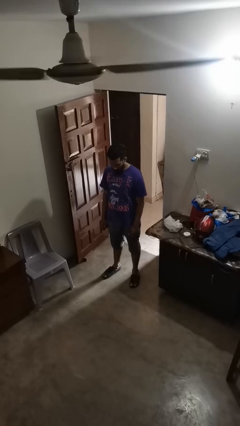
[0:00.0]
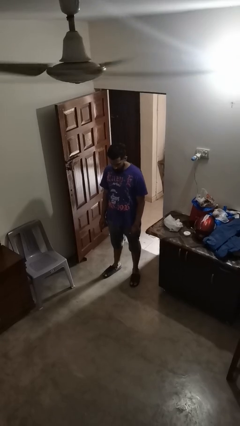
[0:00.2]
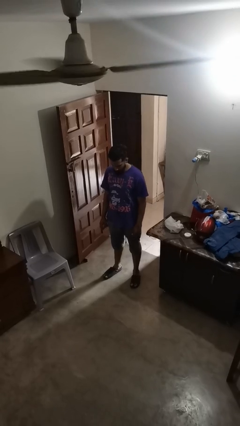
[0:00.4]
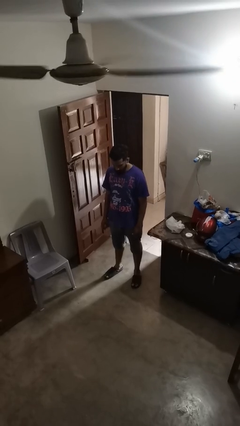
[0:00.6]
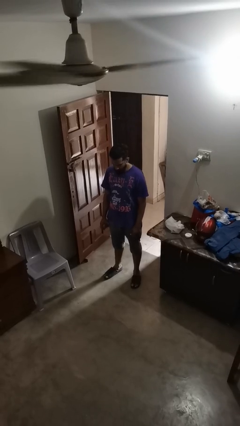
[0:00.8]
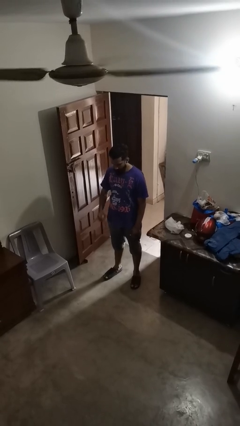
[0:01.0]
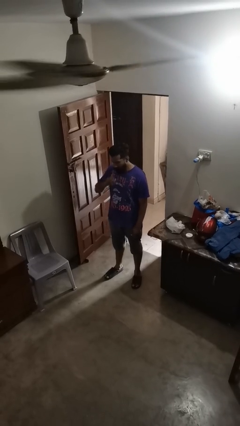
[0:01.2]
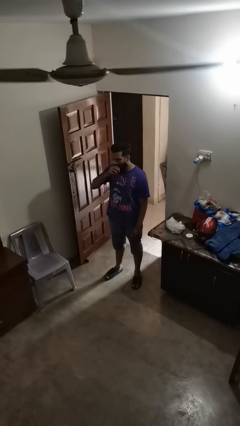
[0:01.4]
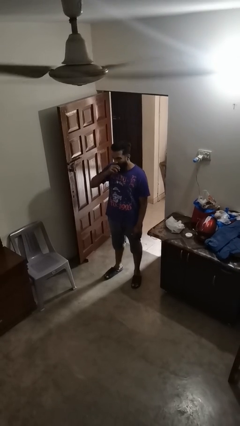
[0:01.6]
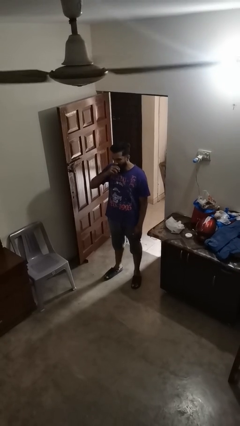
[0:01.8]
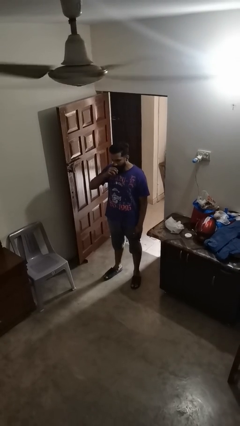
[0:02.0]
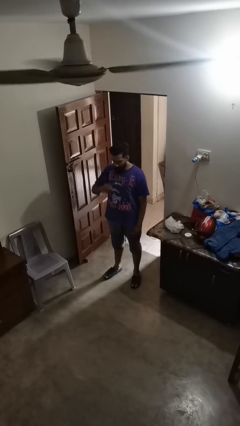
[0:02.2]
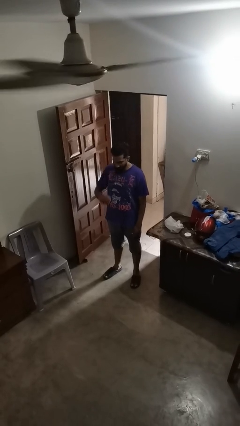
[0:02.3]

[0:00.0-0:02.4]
person eats apple

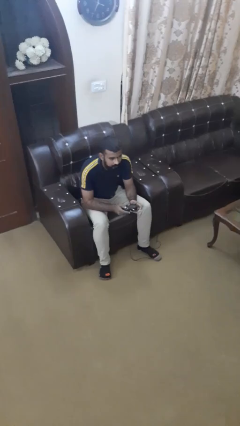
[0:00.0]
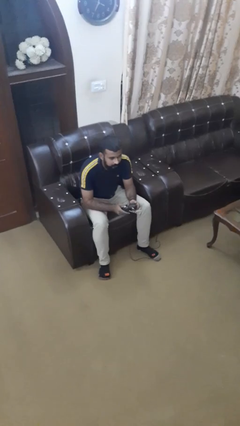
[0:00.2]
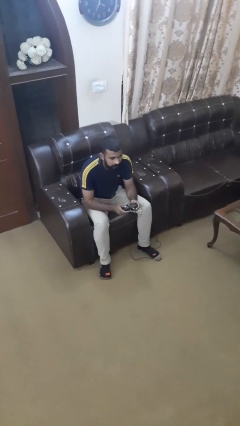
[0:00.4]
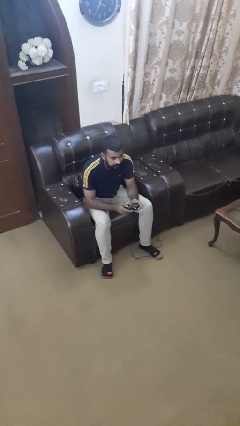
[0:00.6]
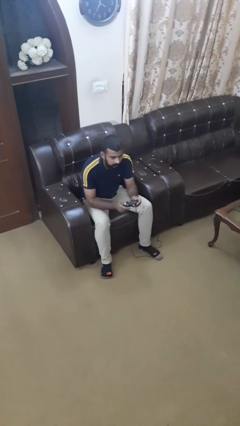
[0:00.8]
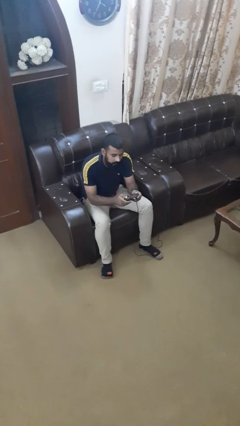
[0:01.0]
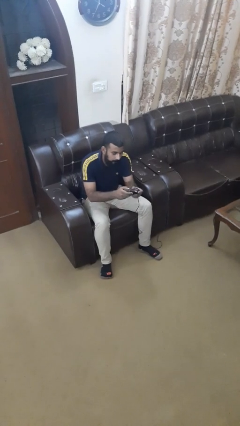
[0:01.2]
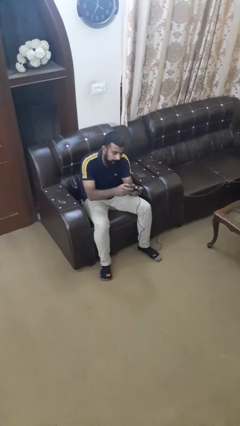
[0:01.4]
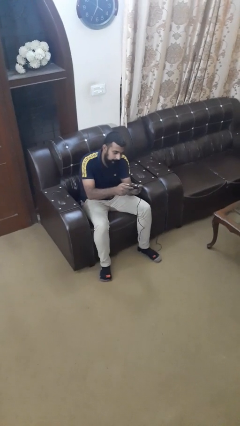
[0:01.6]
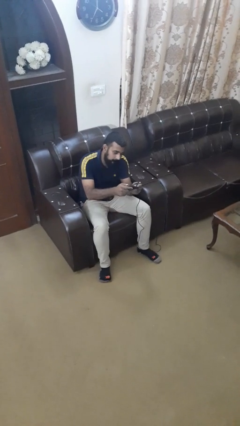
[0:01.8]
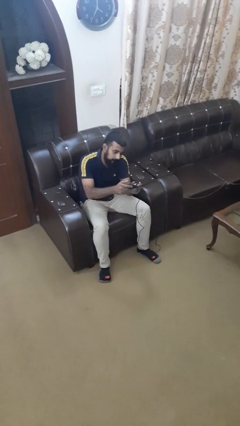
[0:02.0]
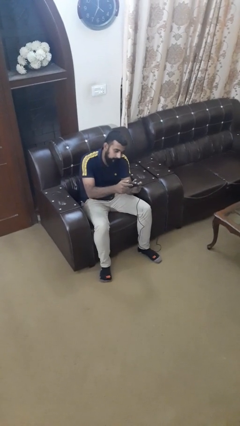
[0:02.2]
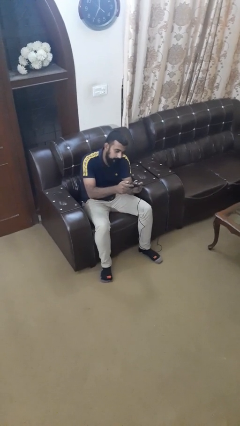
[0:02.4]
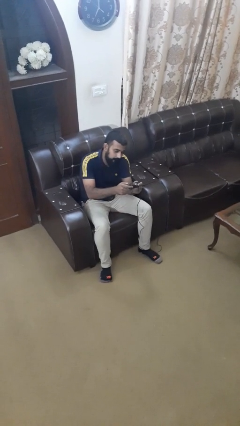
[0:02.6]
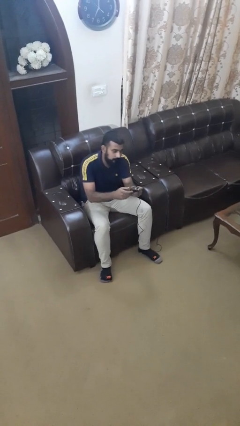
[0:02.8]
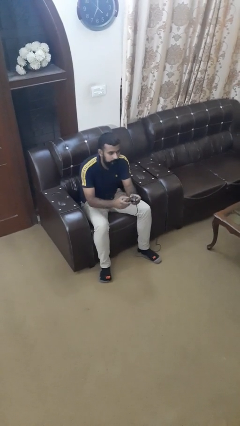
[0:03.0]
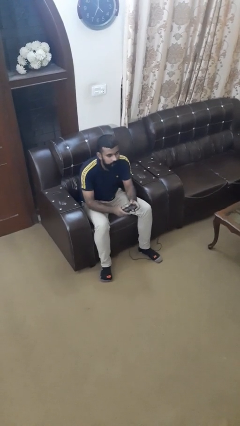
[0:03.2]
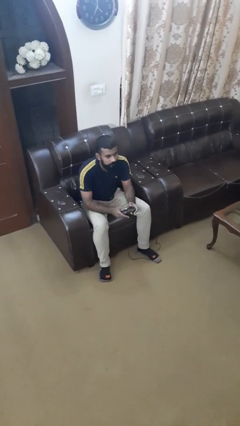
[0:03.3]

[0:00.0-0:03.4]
person interacts with handheld game

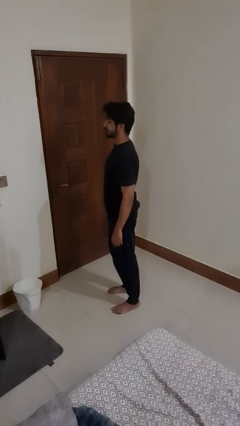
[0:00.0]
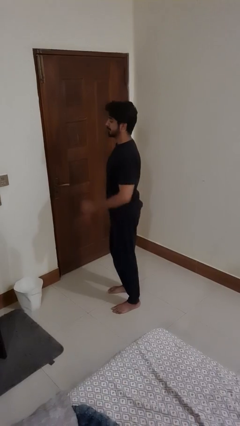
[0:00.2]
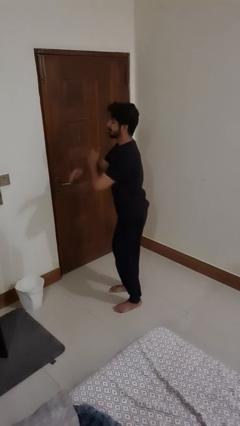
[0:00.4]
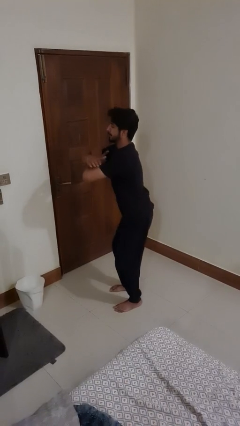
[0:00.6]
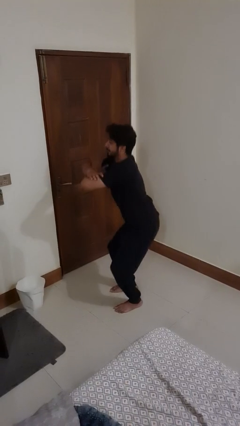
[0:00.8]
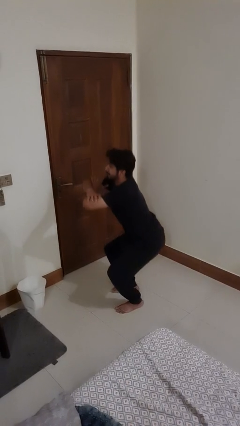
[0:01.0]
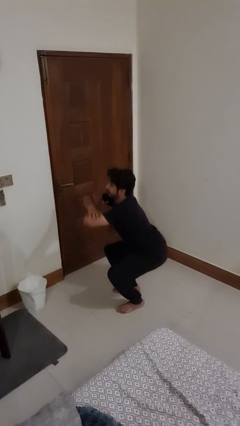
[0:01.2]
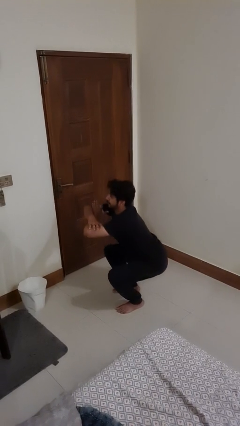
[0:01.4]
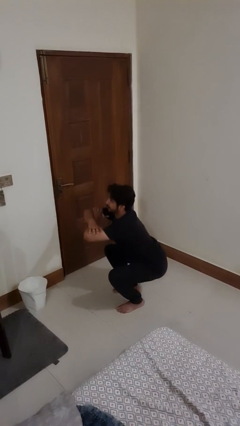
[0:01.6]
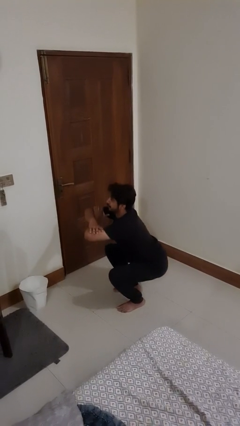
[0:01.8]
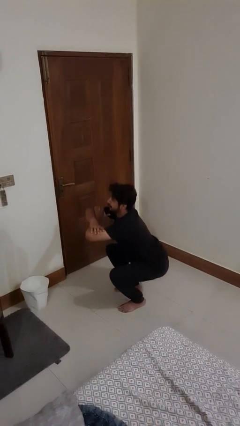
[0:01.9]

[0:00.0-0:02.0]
person squats

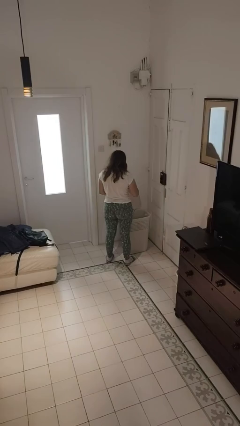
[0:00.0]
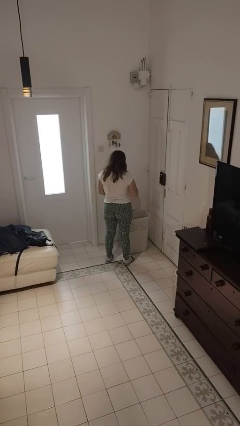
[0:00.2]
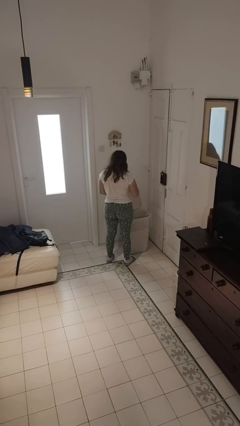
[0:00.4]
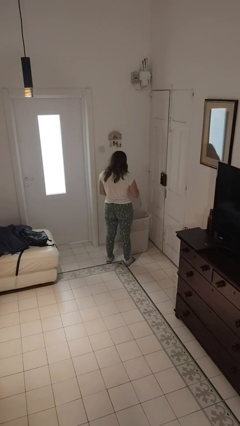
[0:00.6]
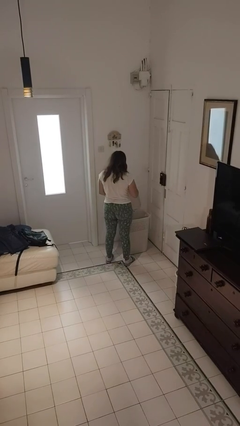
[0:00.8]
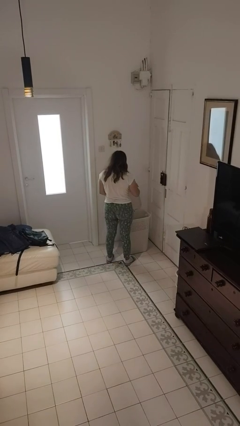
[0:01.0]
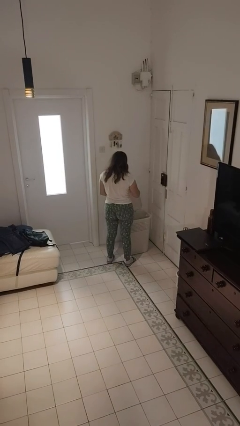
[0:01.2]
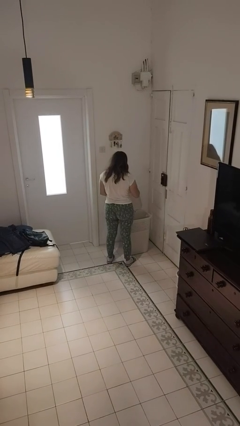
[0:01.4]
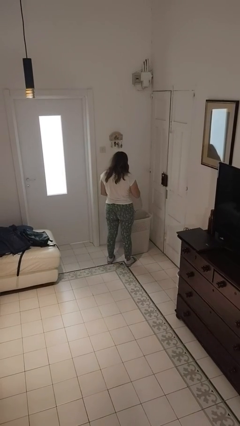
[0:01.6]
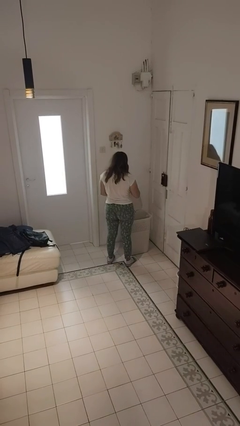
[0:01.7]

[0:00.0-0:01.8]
person discards trash

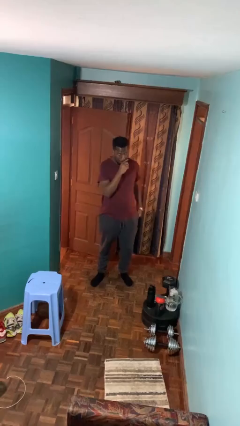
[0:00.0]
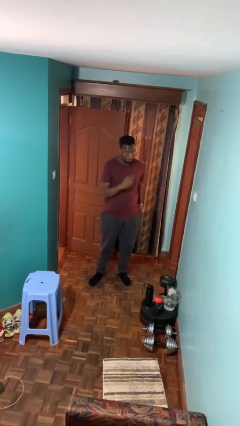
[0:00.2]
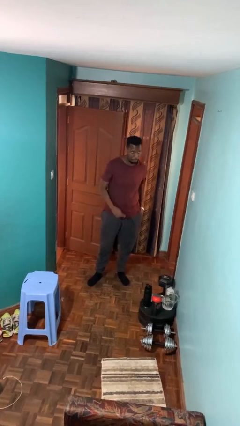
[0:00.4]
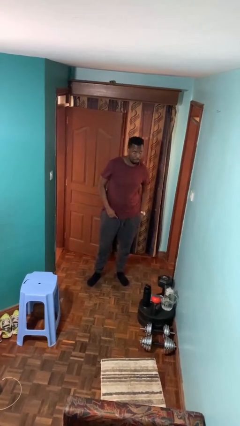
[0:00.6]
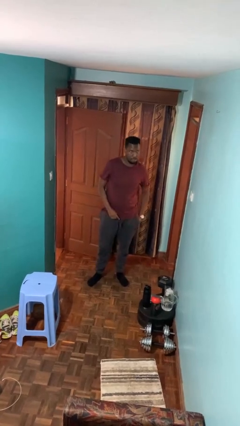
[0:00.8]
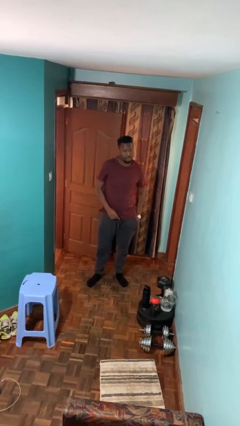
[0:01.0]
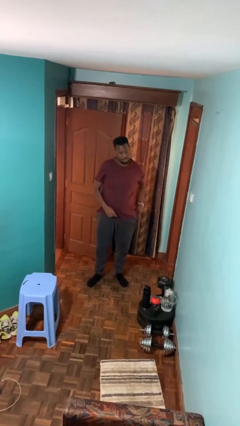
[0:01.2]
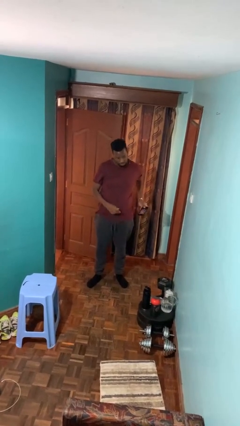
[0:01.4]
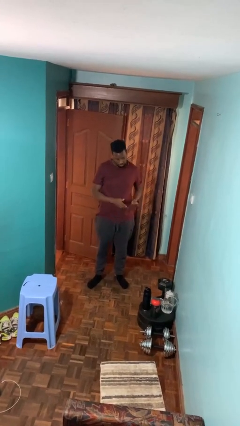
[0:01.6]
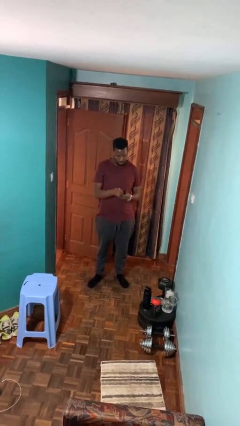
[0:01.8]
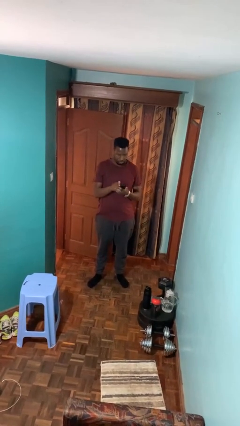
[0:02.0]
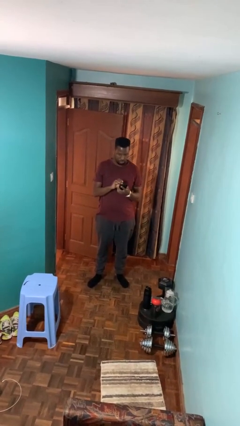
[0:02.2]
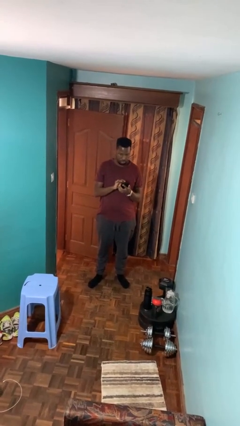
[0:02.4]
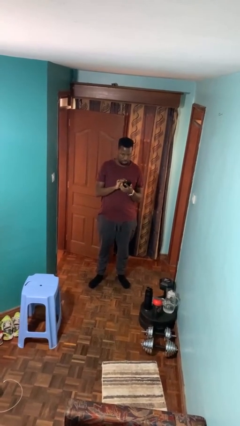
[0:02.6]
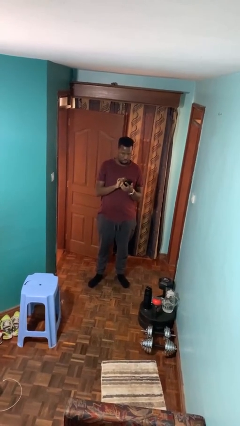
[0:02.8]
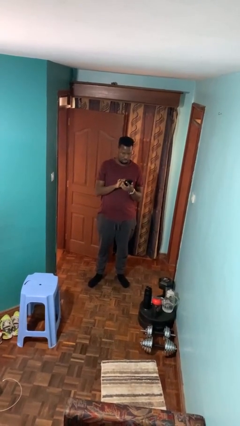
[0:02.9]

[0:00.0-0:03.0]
person takes phone from pocket

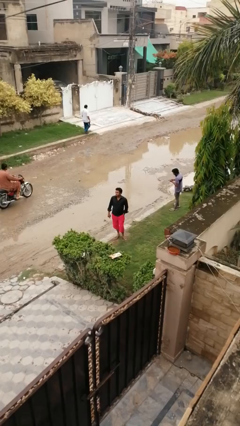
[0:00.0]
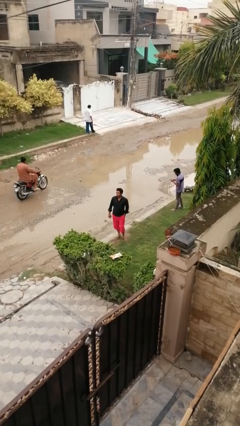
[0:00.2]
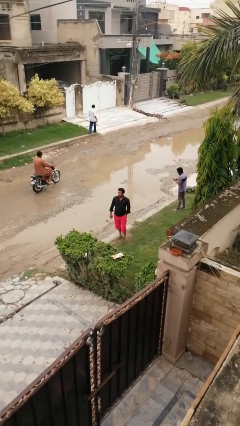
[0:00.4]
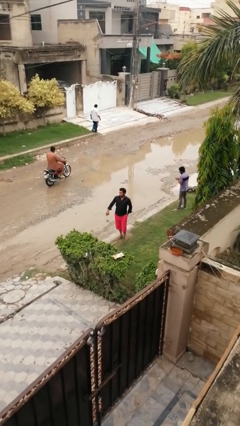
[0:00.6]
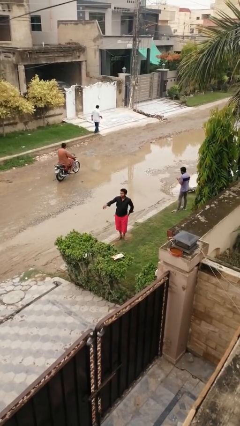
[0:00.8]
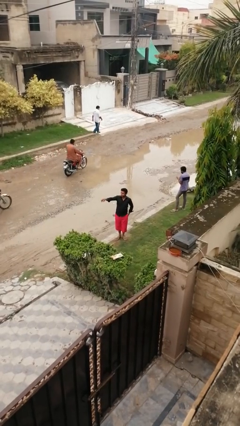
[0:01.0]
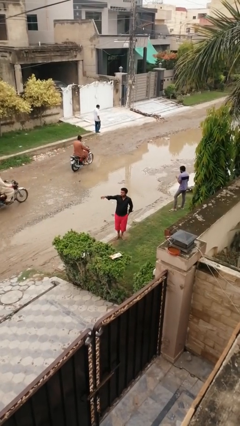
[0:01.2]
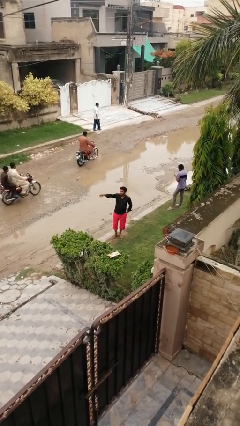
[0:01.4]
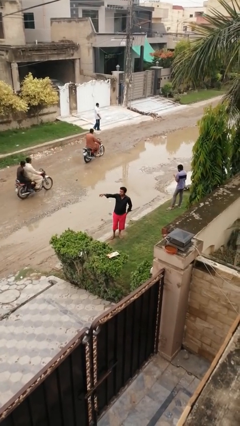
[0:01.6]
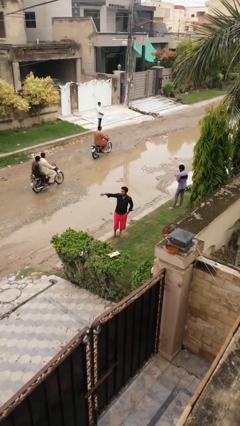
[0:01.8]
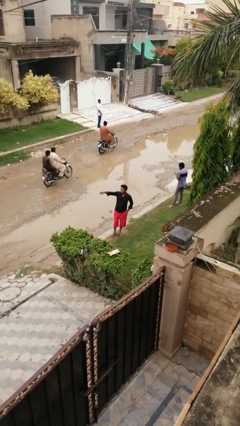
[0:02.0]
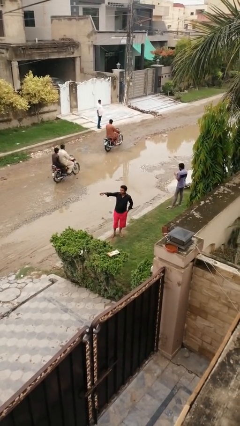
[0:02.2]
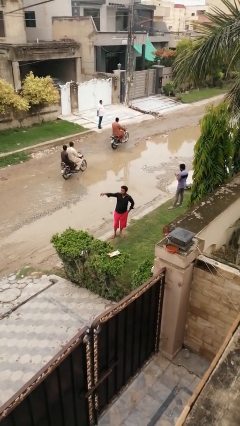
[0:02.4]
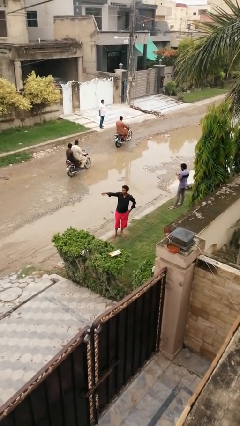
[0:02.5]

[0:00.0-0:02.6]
person points at person

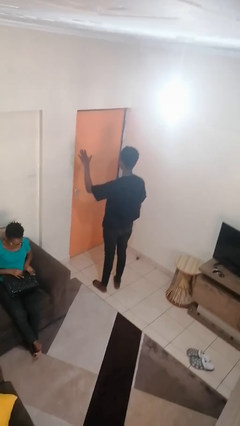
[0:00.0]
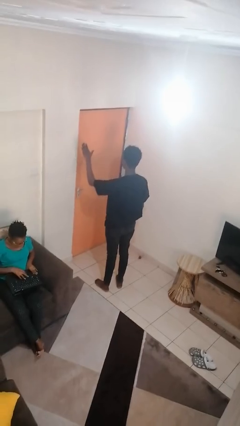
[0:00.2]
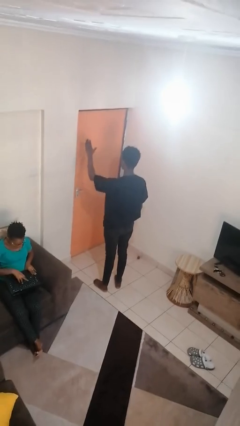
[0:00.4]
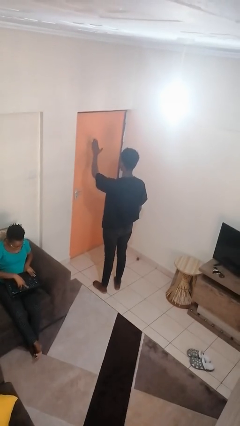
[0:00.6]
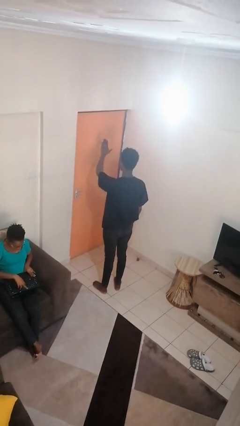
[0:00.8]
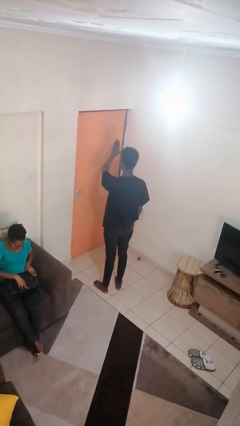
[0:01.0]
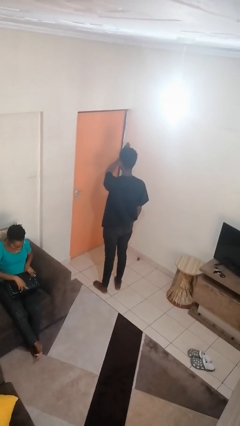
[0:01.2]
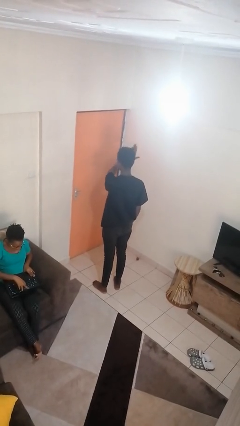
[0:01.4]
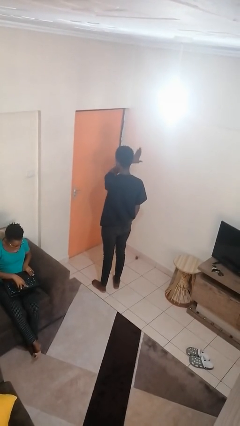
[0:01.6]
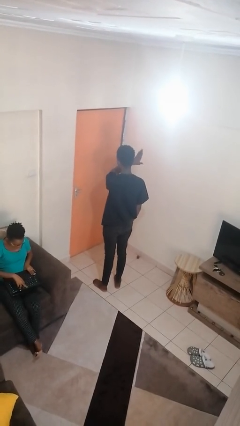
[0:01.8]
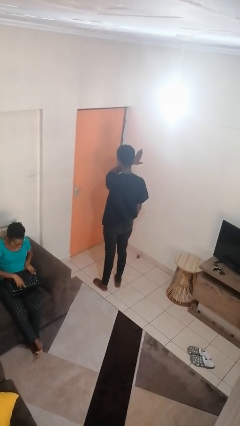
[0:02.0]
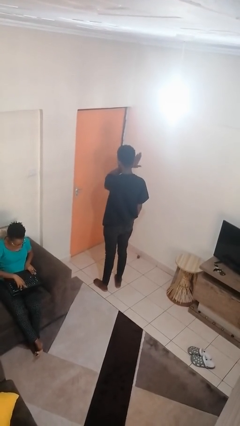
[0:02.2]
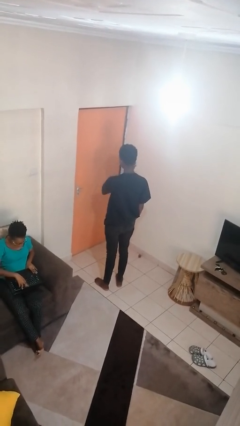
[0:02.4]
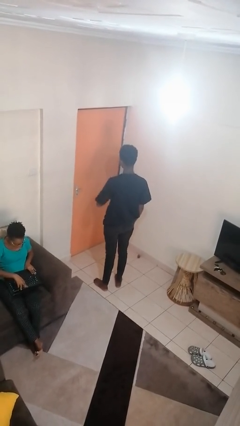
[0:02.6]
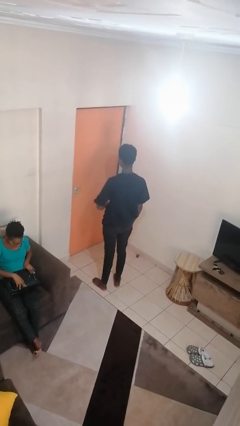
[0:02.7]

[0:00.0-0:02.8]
person gestures swipe right
